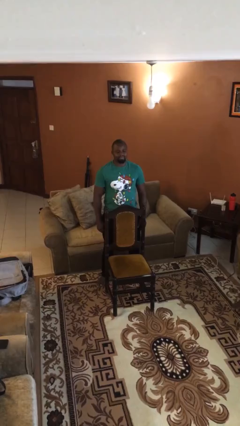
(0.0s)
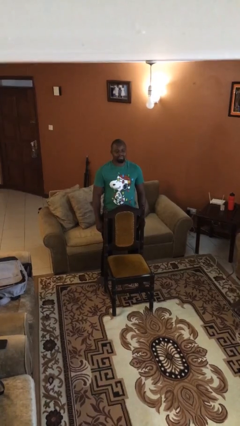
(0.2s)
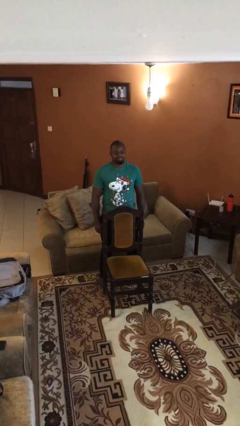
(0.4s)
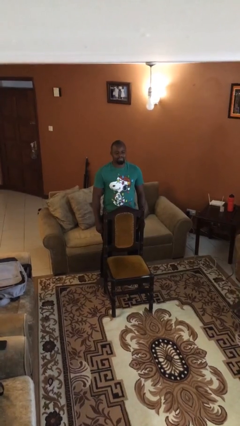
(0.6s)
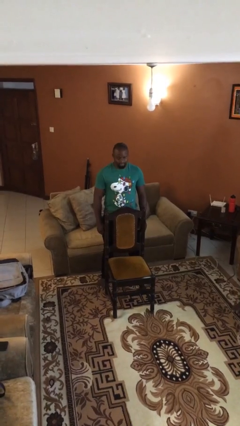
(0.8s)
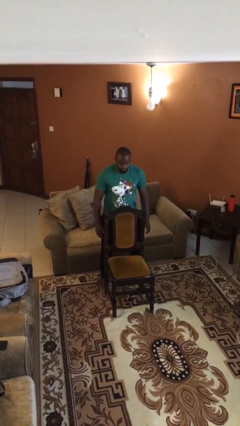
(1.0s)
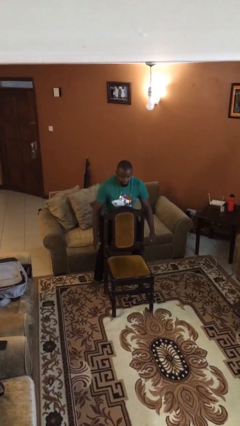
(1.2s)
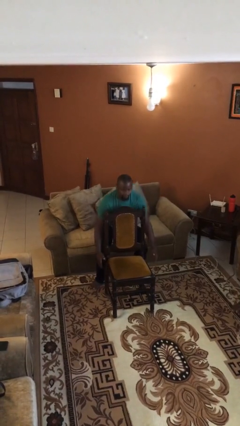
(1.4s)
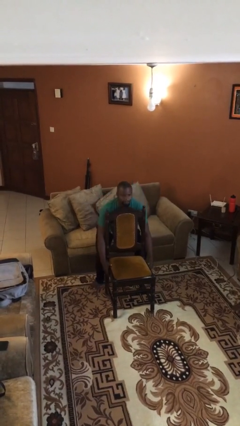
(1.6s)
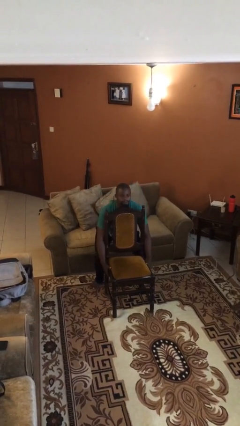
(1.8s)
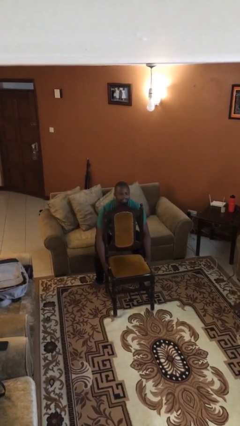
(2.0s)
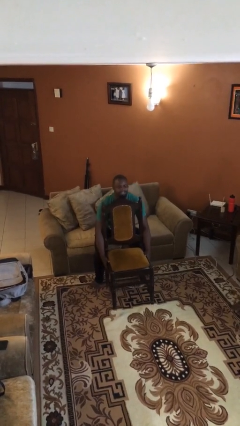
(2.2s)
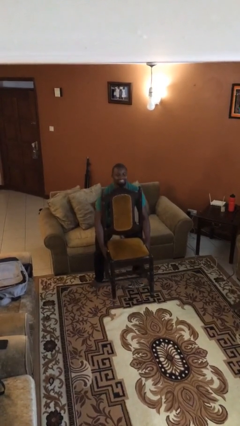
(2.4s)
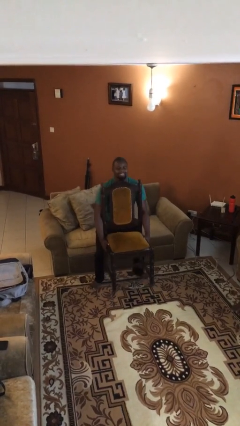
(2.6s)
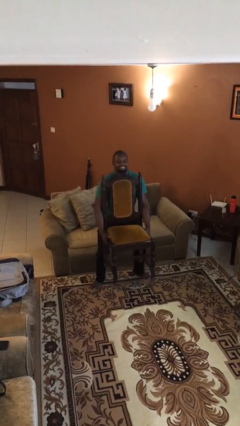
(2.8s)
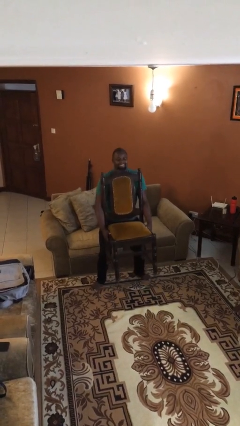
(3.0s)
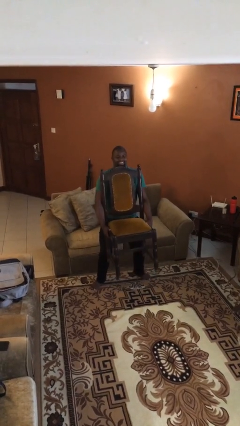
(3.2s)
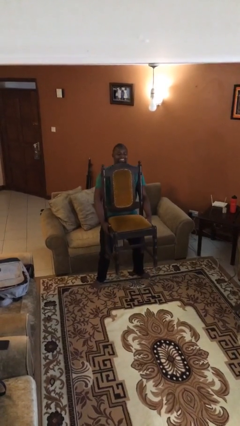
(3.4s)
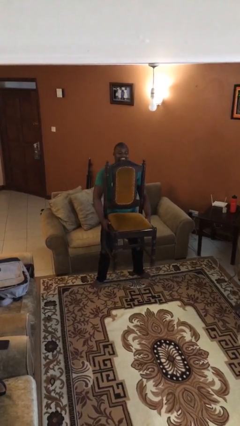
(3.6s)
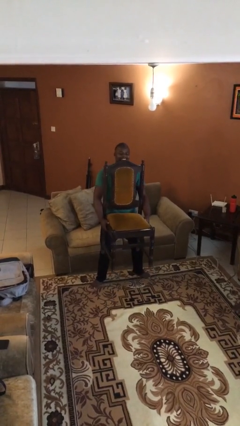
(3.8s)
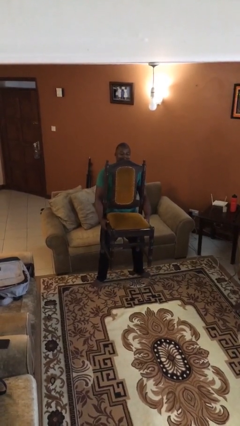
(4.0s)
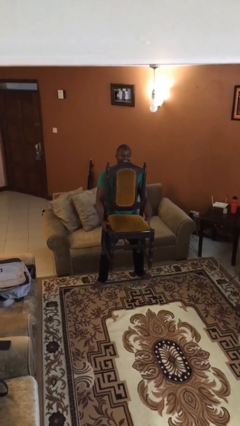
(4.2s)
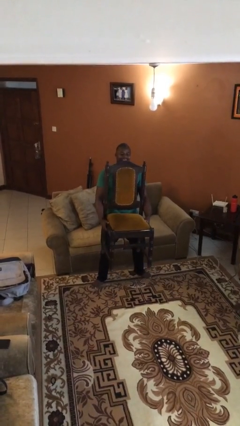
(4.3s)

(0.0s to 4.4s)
person picks up object from floor

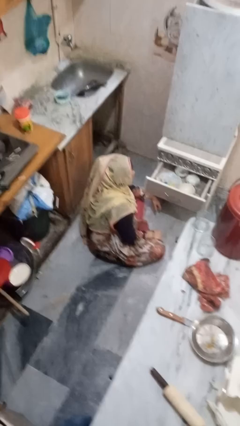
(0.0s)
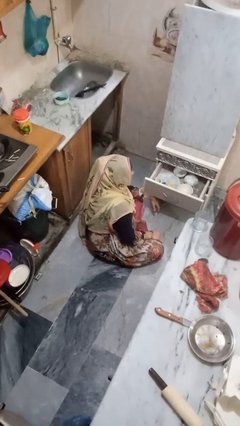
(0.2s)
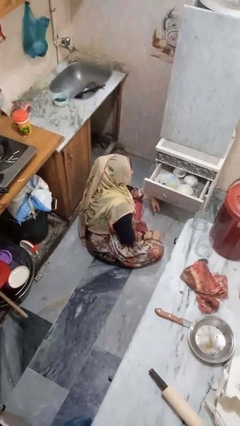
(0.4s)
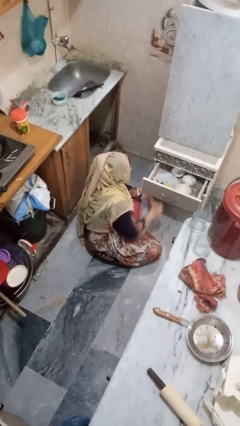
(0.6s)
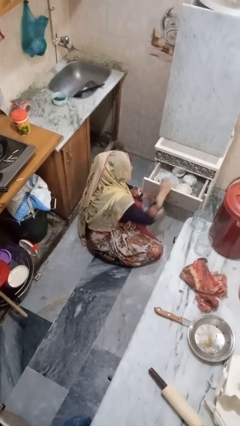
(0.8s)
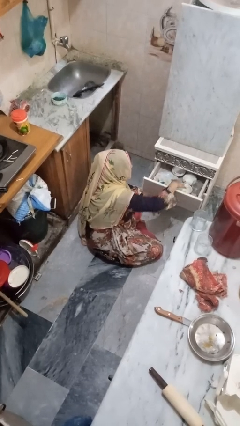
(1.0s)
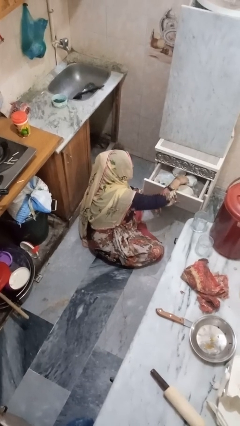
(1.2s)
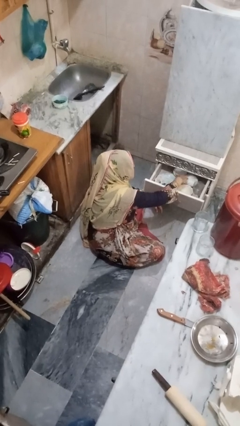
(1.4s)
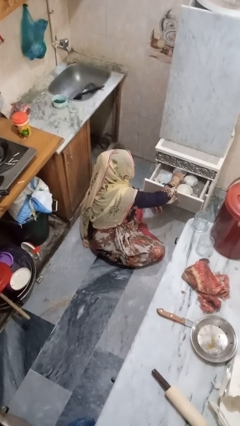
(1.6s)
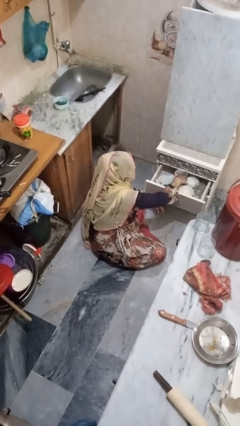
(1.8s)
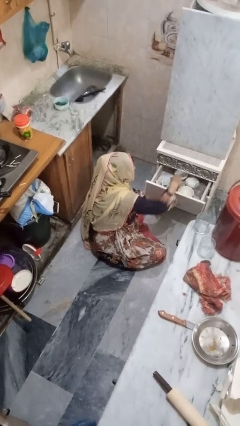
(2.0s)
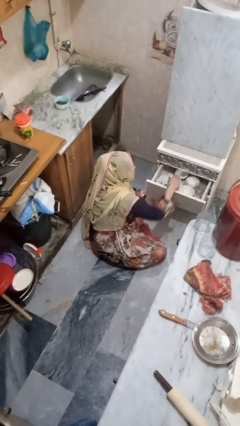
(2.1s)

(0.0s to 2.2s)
person searches in kitchen drawer

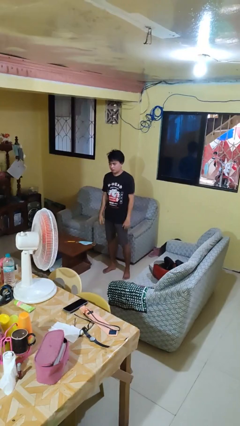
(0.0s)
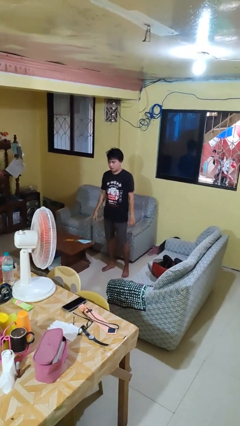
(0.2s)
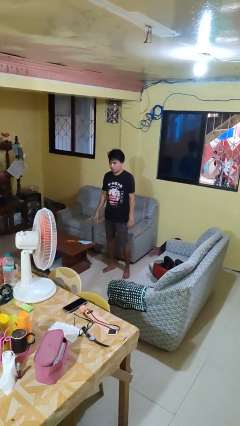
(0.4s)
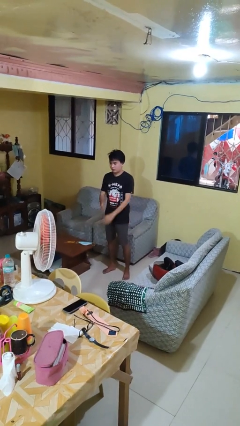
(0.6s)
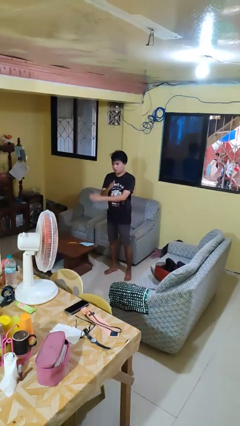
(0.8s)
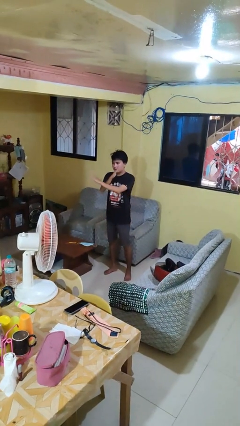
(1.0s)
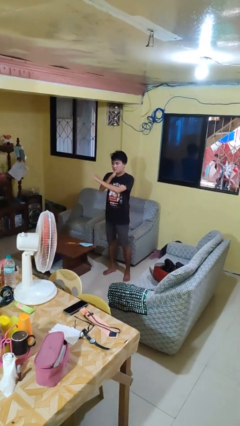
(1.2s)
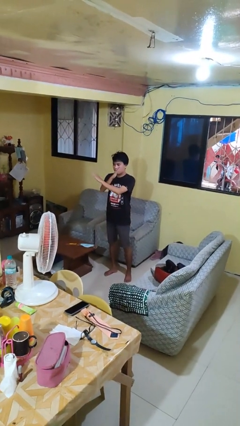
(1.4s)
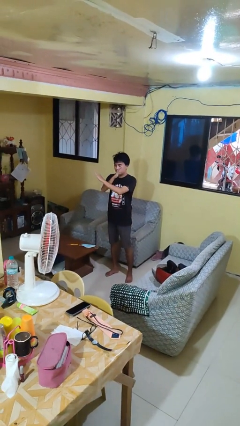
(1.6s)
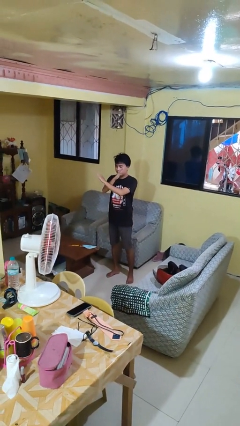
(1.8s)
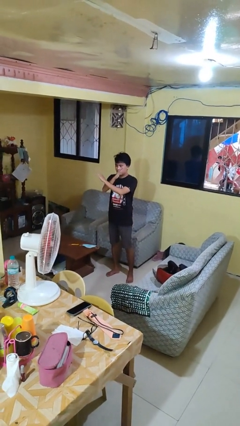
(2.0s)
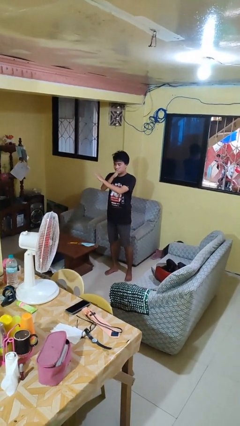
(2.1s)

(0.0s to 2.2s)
person gestures arms x

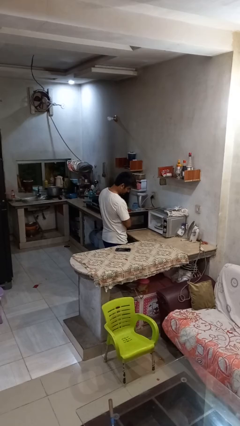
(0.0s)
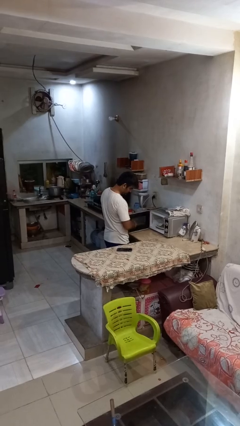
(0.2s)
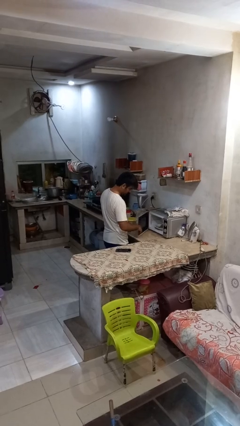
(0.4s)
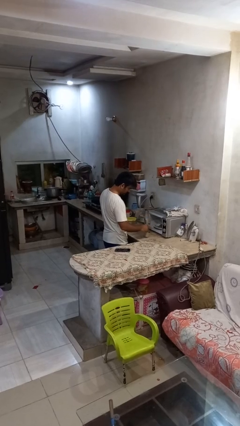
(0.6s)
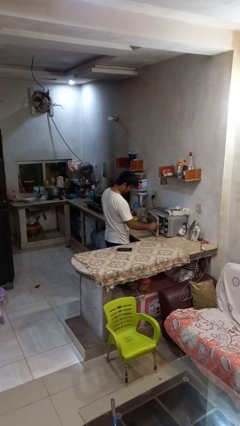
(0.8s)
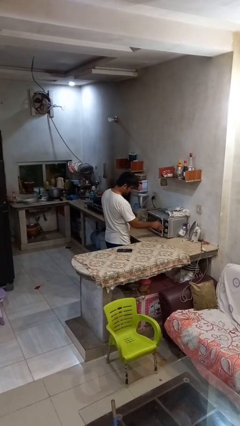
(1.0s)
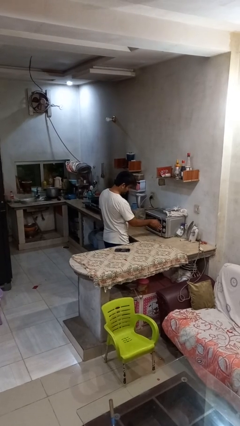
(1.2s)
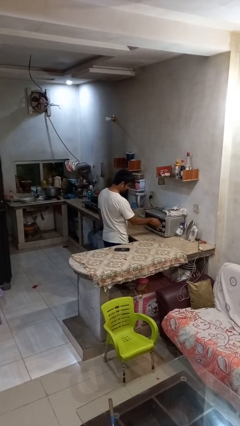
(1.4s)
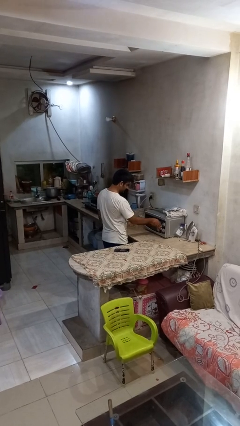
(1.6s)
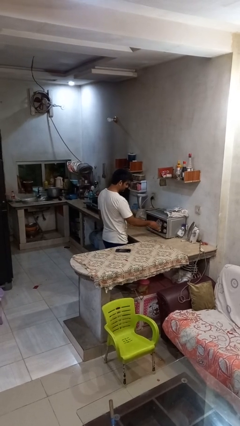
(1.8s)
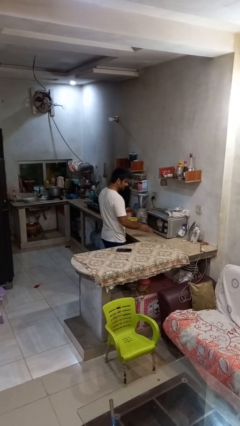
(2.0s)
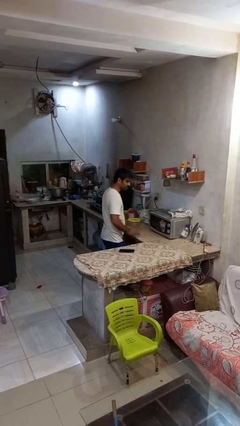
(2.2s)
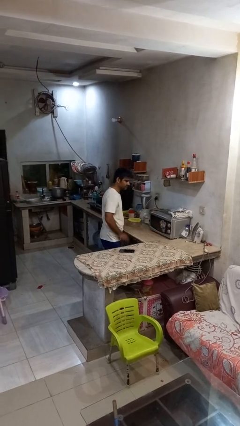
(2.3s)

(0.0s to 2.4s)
person closes microwave

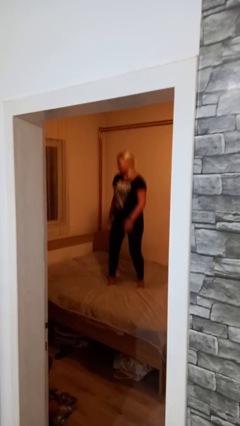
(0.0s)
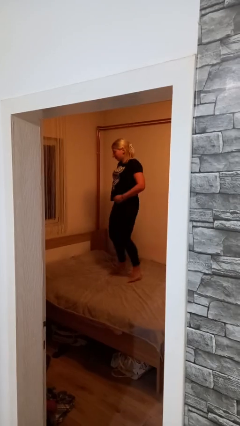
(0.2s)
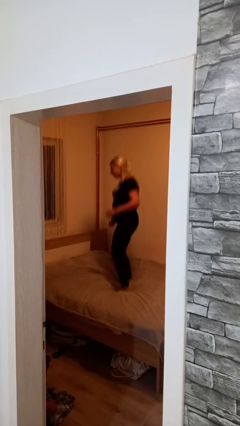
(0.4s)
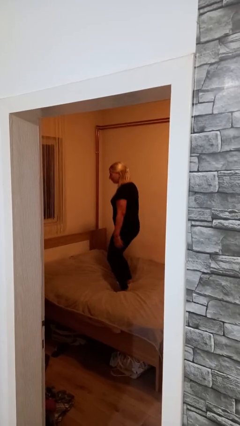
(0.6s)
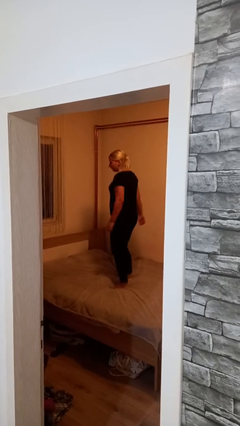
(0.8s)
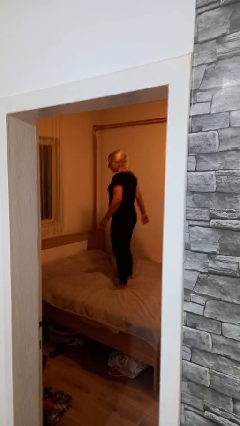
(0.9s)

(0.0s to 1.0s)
person jumps on bed

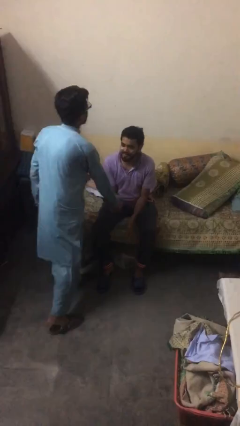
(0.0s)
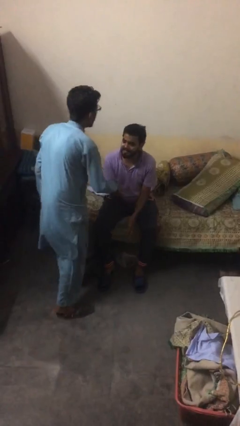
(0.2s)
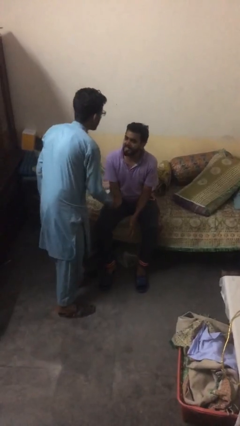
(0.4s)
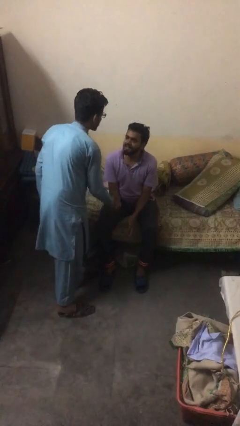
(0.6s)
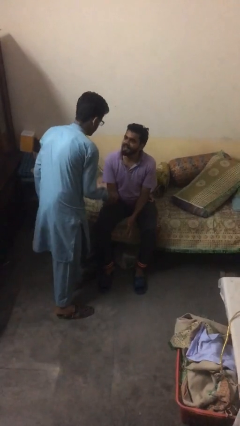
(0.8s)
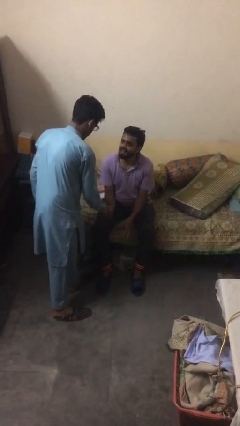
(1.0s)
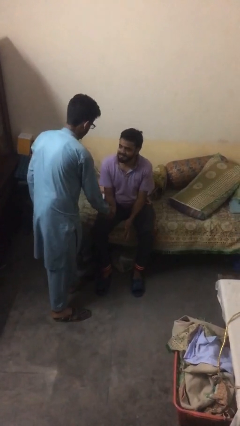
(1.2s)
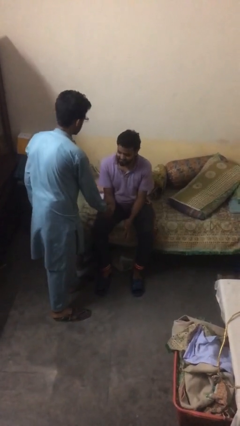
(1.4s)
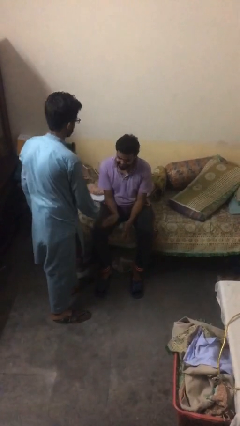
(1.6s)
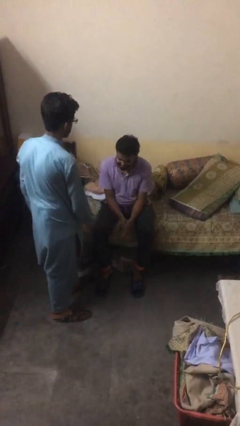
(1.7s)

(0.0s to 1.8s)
person shakes hand

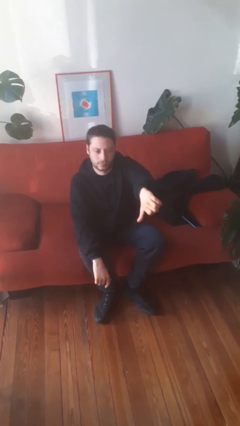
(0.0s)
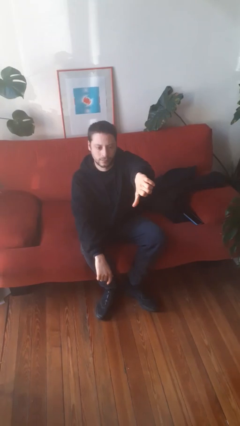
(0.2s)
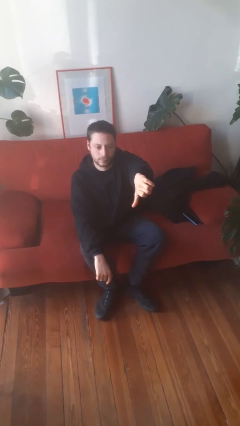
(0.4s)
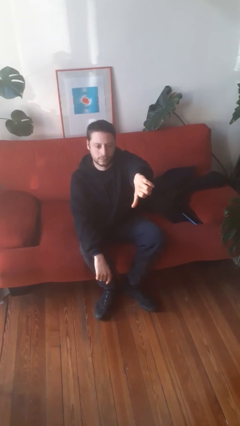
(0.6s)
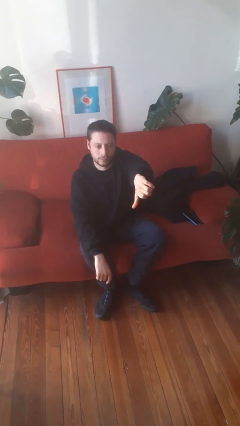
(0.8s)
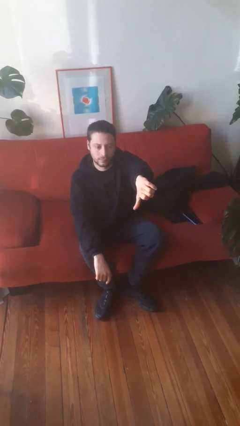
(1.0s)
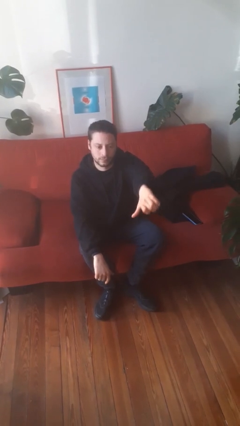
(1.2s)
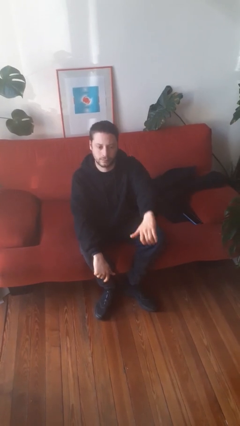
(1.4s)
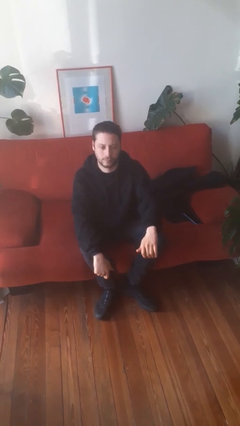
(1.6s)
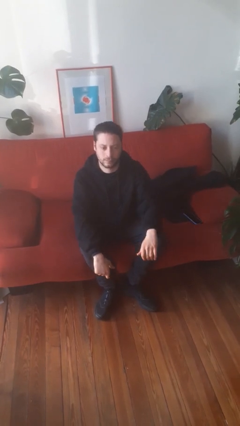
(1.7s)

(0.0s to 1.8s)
person gestures thumbs down

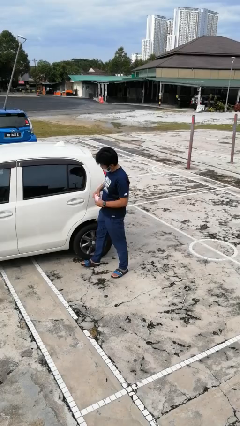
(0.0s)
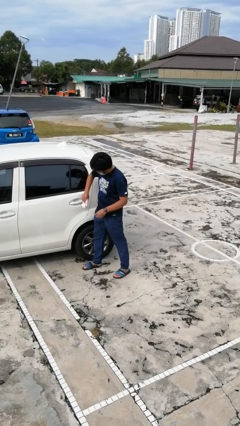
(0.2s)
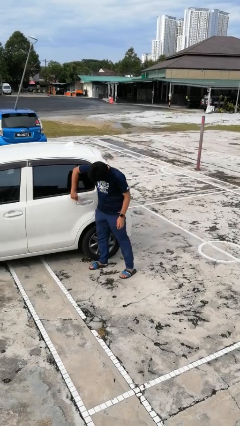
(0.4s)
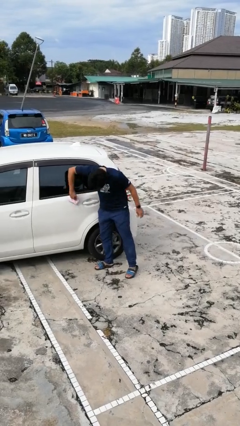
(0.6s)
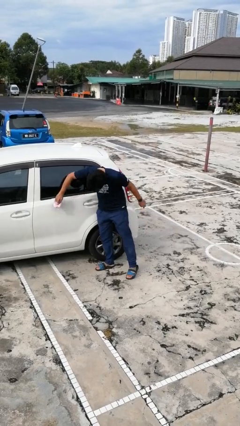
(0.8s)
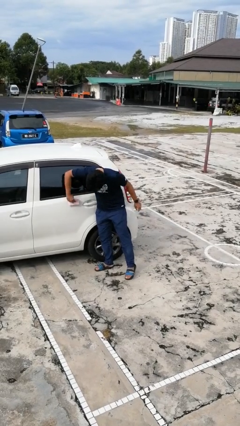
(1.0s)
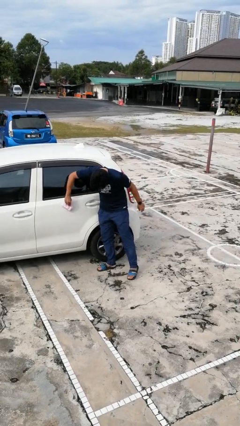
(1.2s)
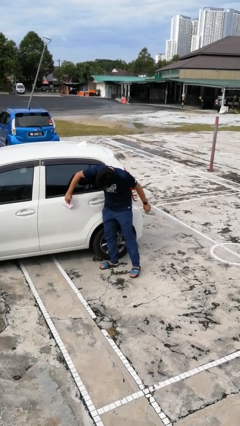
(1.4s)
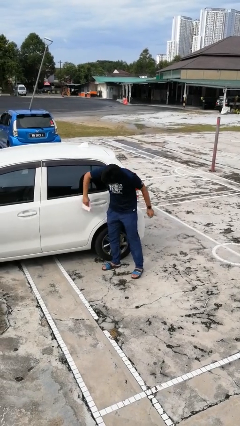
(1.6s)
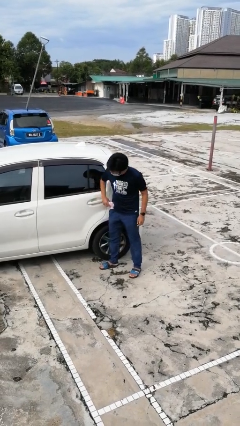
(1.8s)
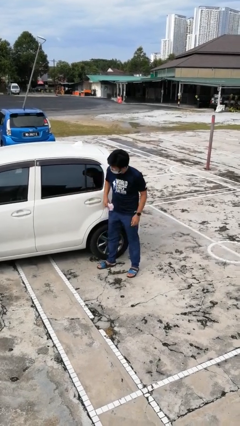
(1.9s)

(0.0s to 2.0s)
person polishes car with rag
